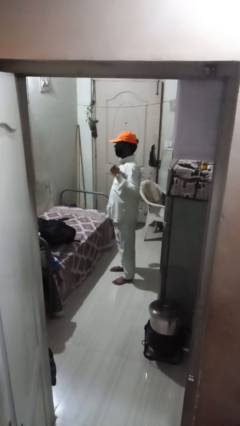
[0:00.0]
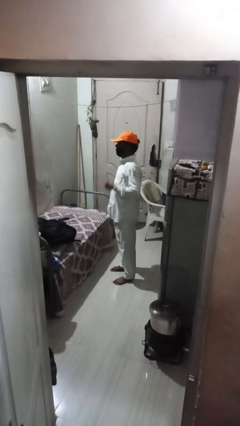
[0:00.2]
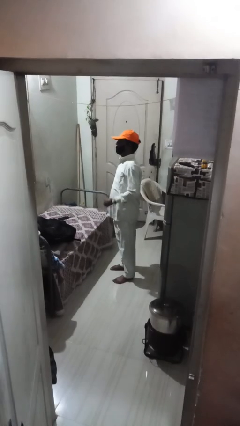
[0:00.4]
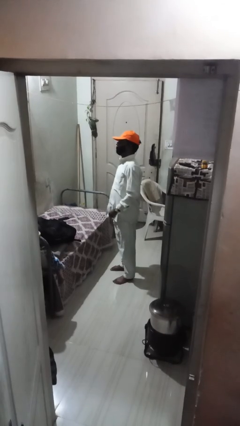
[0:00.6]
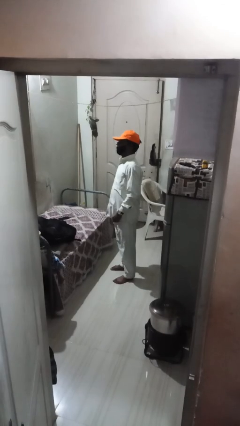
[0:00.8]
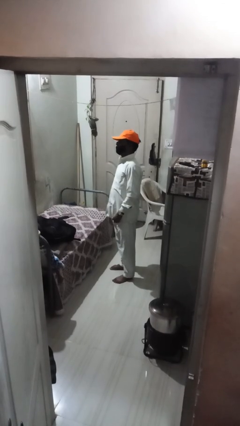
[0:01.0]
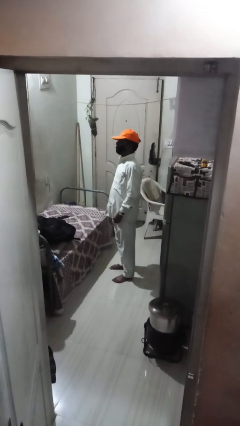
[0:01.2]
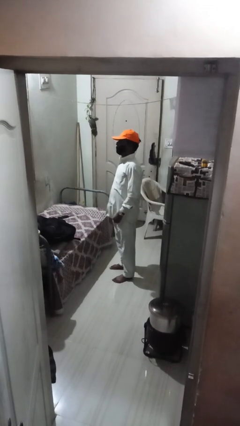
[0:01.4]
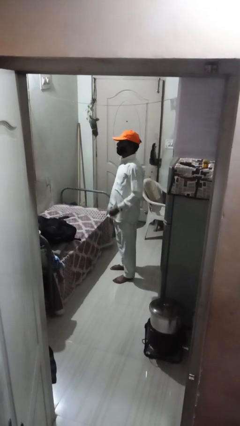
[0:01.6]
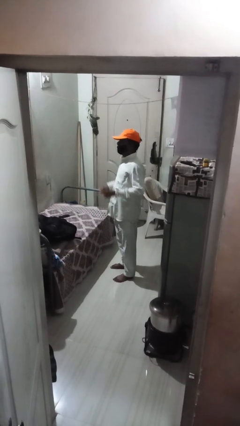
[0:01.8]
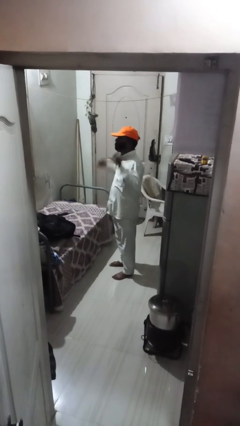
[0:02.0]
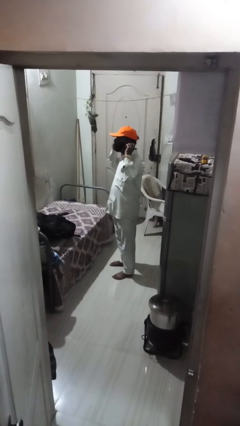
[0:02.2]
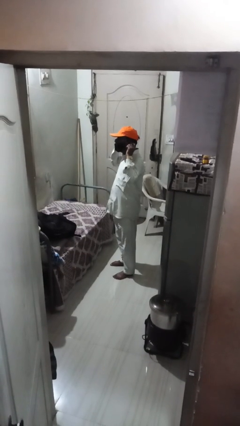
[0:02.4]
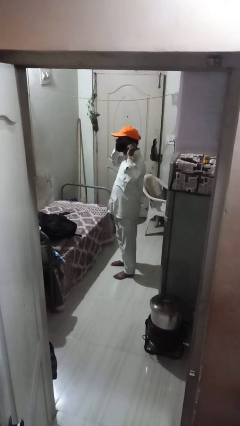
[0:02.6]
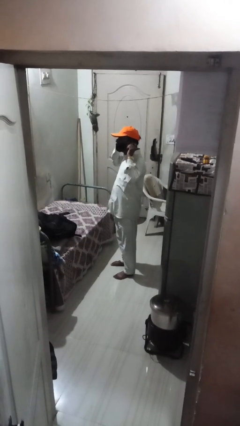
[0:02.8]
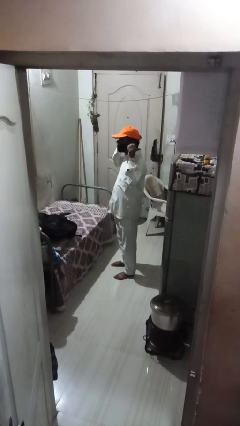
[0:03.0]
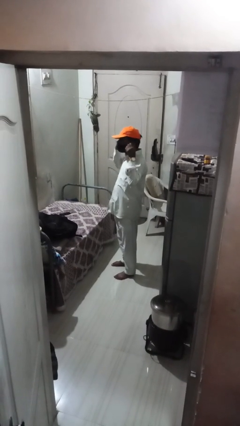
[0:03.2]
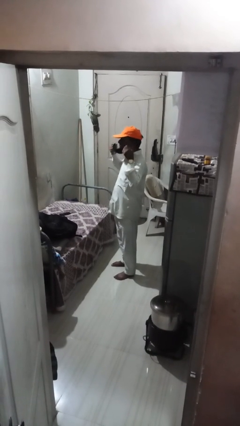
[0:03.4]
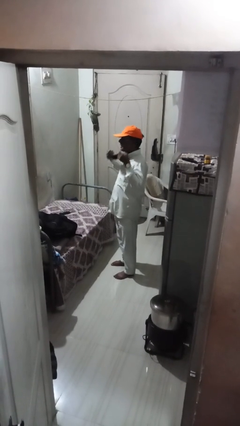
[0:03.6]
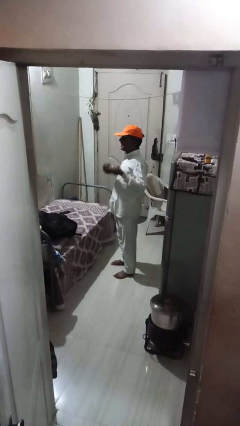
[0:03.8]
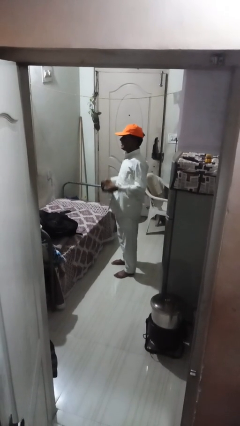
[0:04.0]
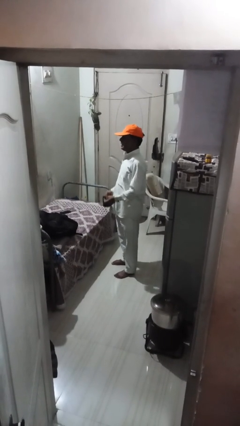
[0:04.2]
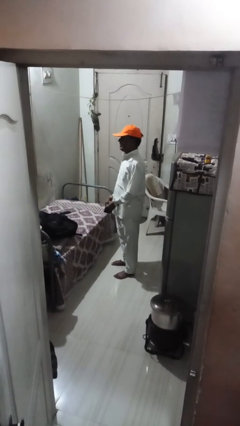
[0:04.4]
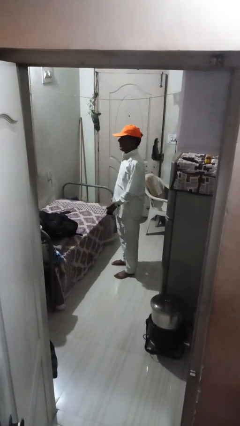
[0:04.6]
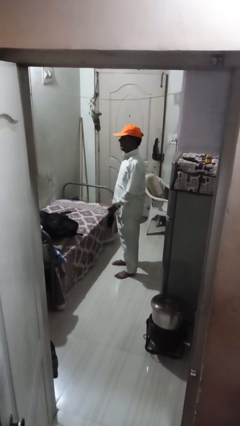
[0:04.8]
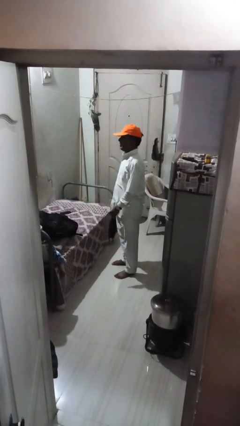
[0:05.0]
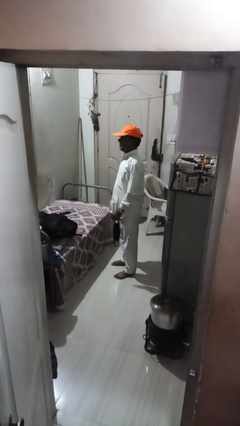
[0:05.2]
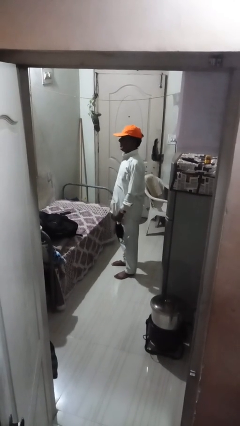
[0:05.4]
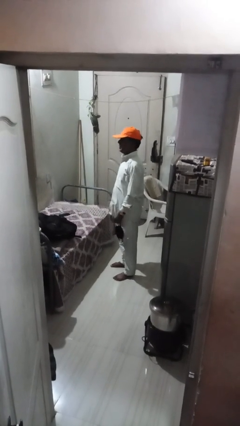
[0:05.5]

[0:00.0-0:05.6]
person takes off facemask

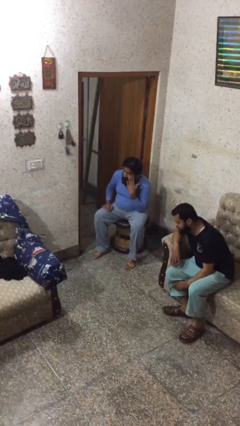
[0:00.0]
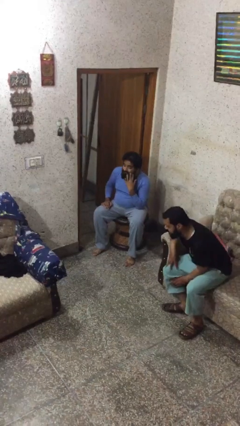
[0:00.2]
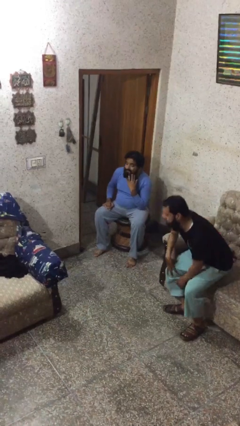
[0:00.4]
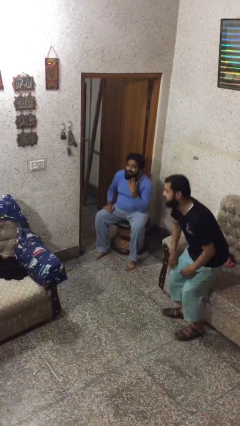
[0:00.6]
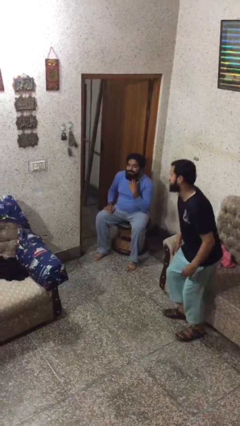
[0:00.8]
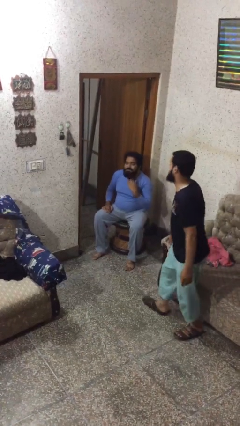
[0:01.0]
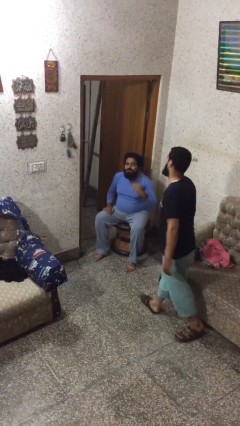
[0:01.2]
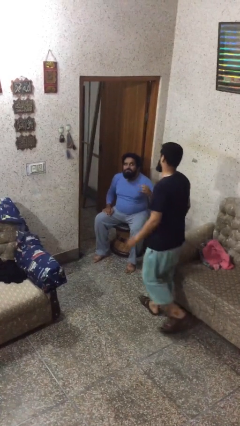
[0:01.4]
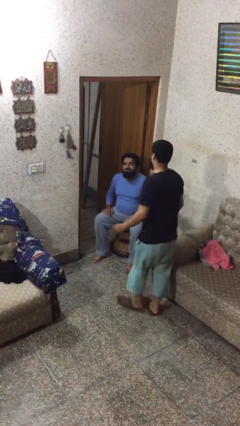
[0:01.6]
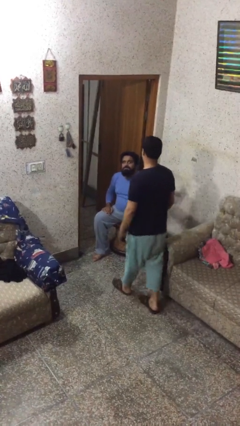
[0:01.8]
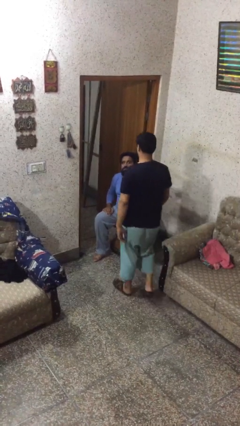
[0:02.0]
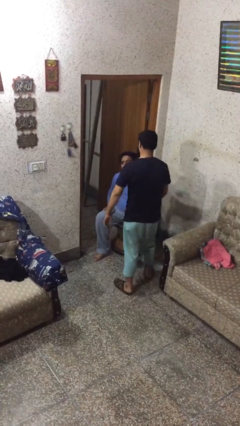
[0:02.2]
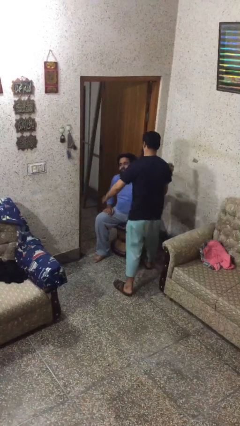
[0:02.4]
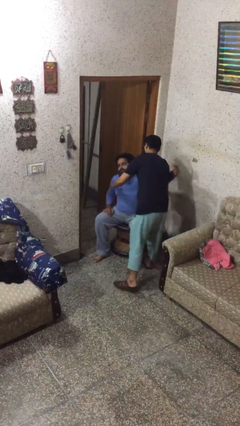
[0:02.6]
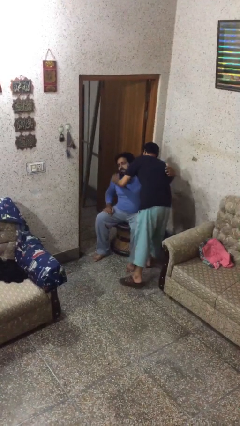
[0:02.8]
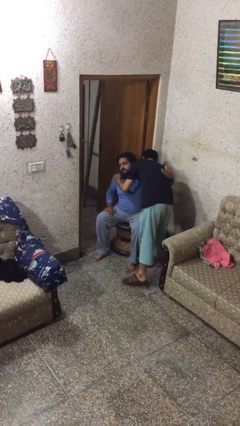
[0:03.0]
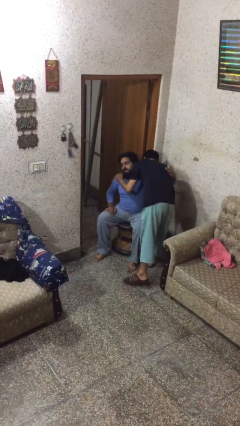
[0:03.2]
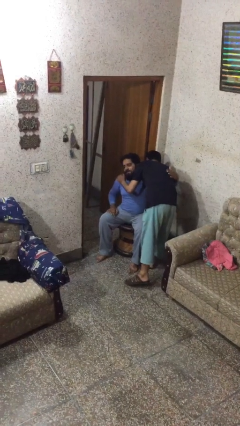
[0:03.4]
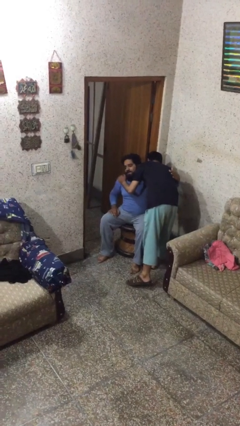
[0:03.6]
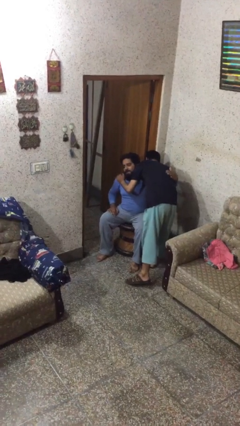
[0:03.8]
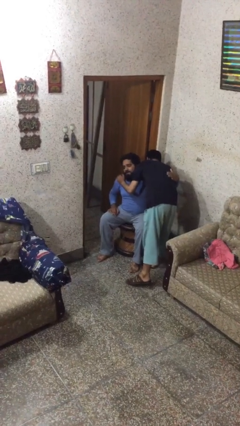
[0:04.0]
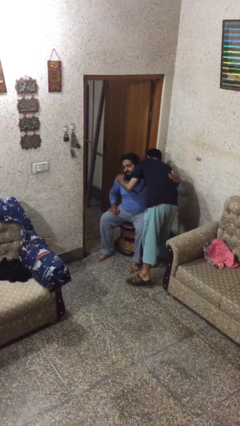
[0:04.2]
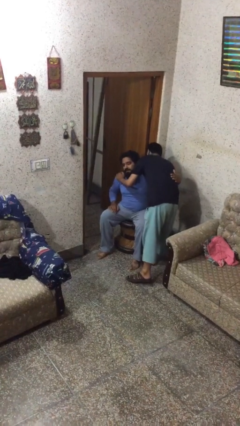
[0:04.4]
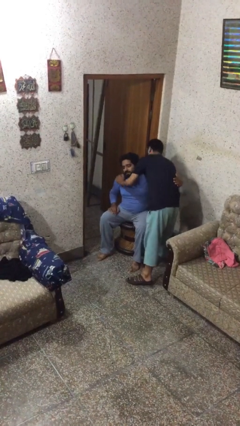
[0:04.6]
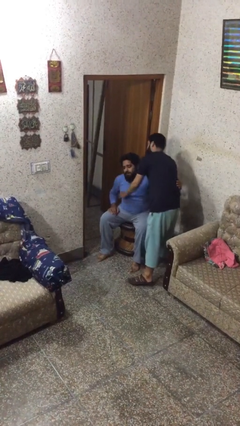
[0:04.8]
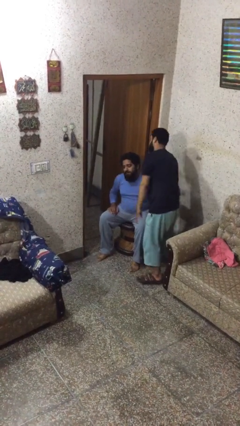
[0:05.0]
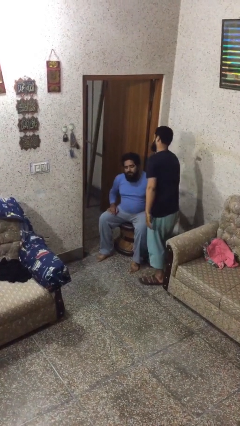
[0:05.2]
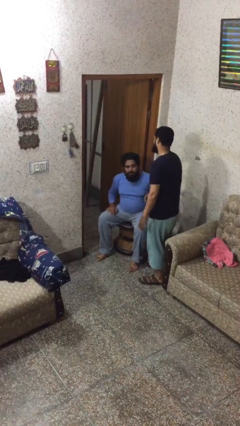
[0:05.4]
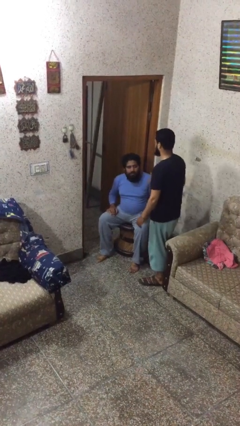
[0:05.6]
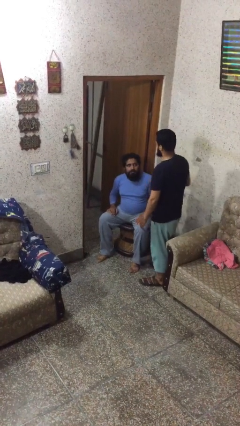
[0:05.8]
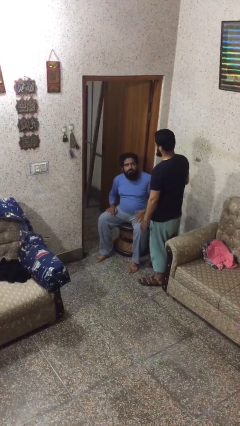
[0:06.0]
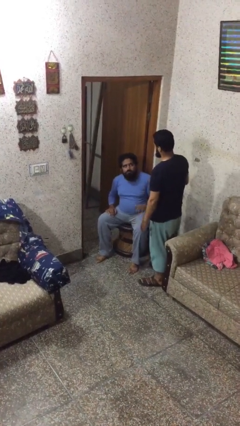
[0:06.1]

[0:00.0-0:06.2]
person embraces person

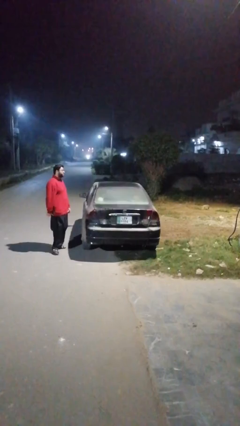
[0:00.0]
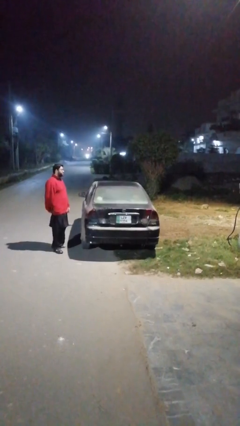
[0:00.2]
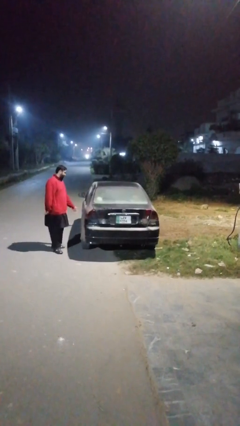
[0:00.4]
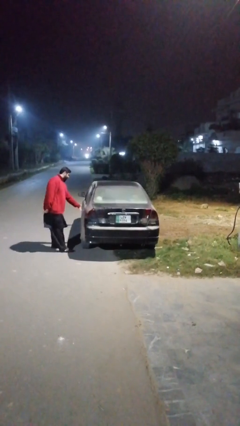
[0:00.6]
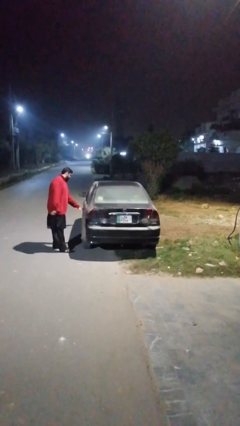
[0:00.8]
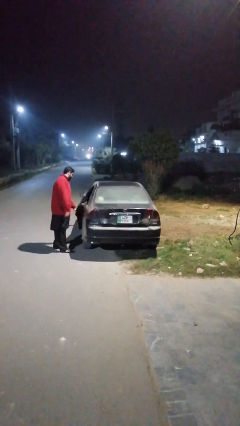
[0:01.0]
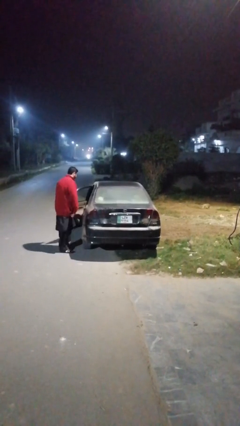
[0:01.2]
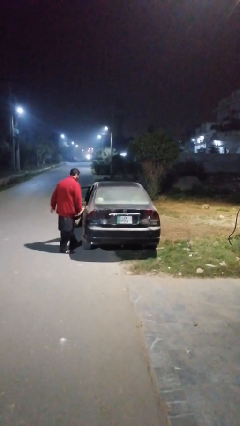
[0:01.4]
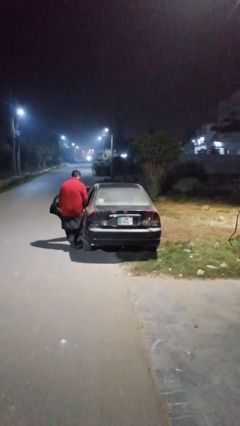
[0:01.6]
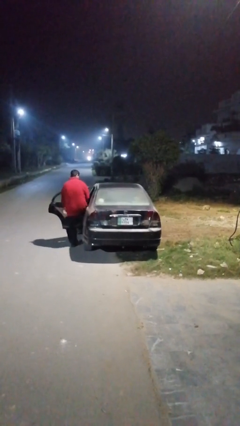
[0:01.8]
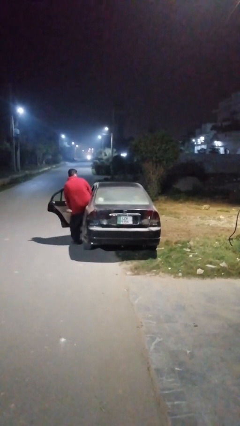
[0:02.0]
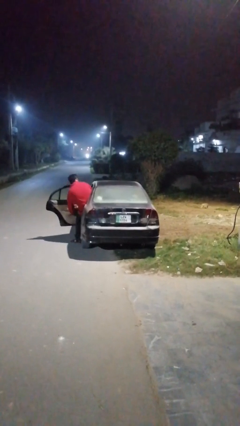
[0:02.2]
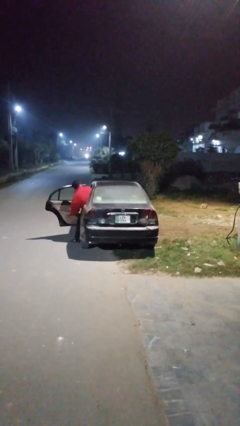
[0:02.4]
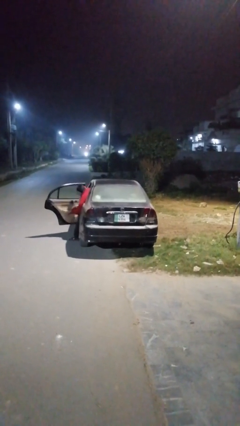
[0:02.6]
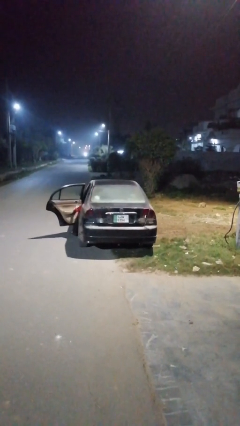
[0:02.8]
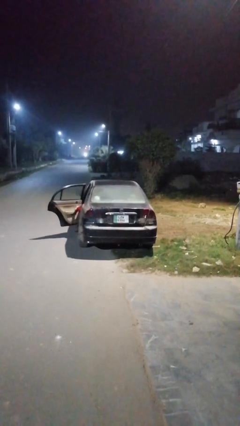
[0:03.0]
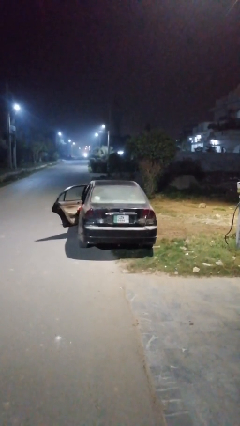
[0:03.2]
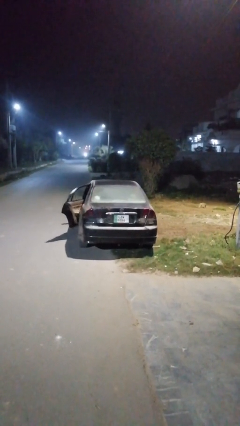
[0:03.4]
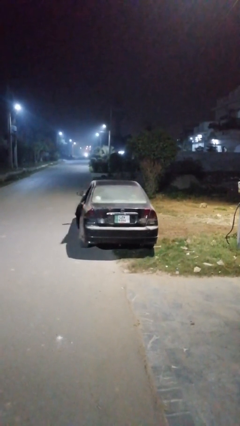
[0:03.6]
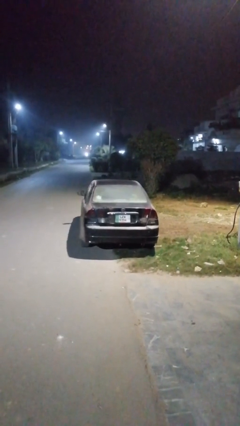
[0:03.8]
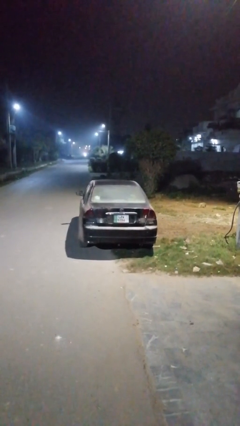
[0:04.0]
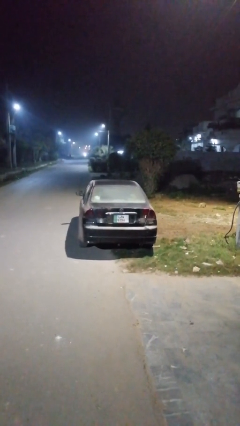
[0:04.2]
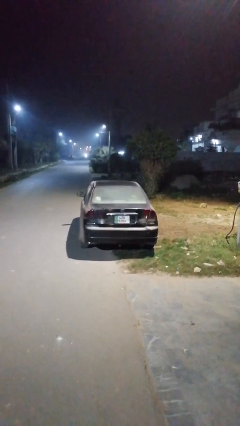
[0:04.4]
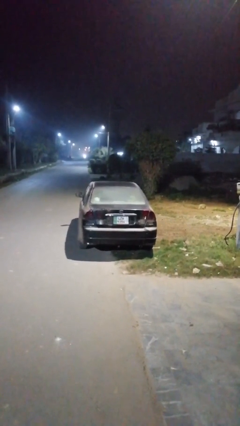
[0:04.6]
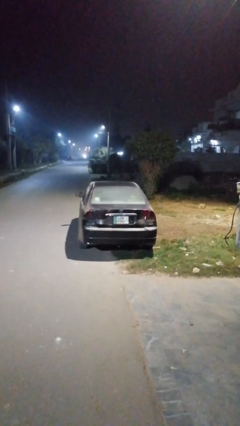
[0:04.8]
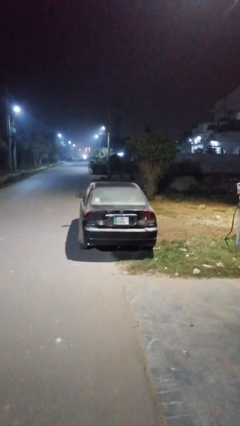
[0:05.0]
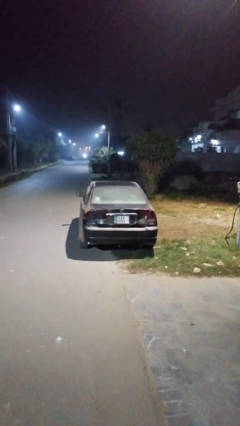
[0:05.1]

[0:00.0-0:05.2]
car picks up person

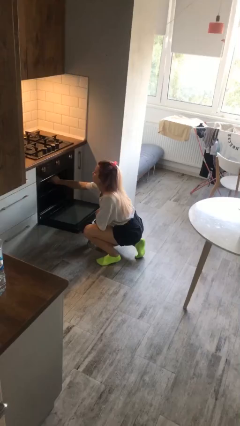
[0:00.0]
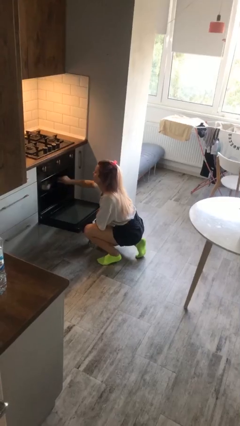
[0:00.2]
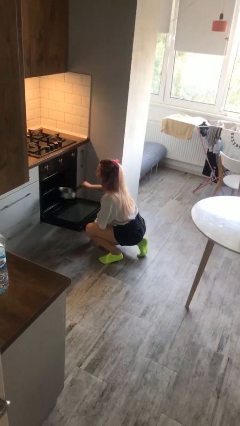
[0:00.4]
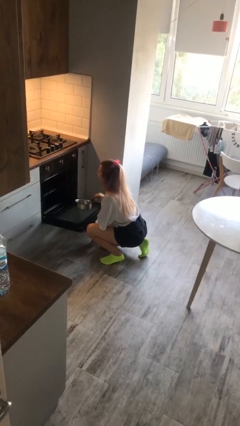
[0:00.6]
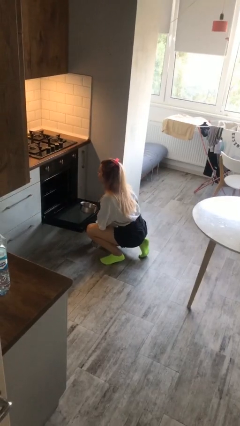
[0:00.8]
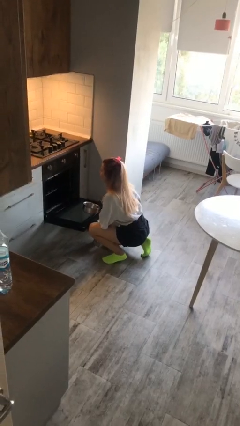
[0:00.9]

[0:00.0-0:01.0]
person takes object from oven
